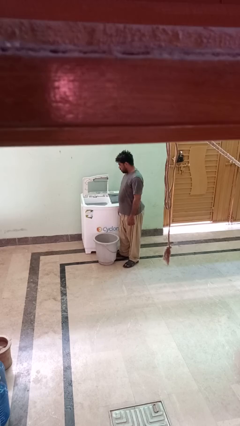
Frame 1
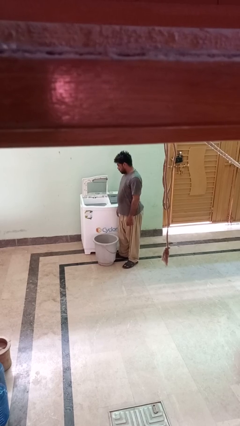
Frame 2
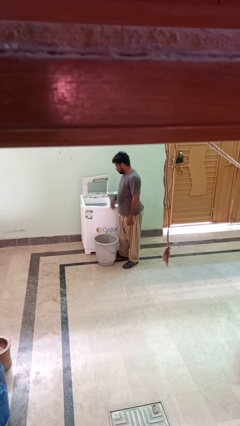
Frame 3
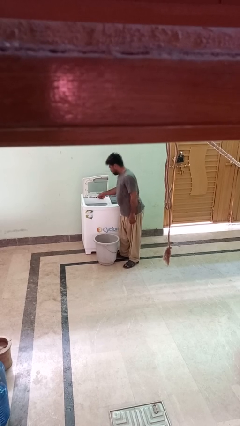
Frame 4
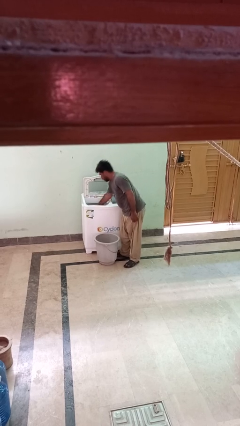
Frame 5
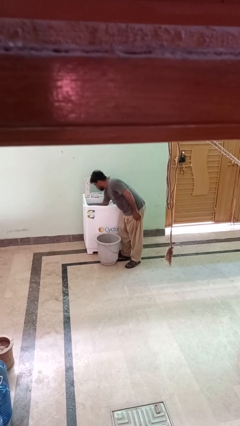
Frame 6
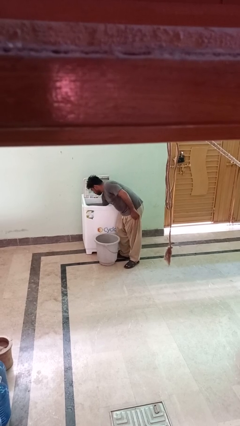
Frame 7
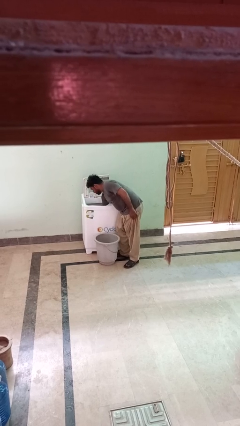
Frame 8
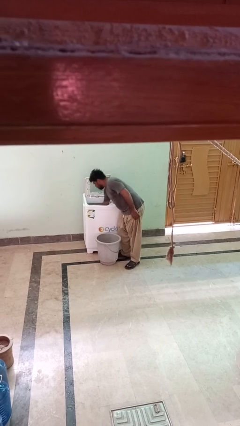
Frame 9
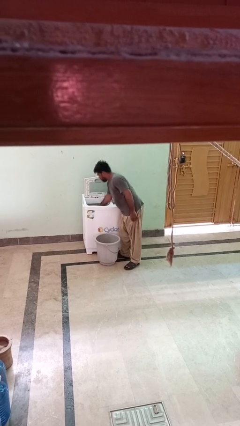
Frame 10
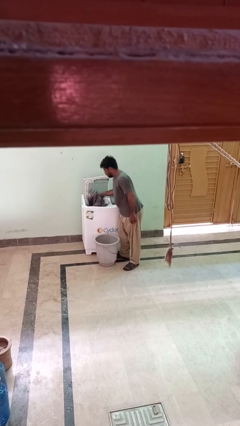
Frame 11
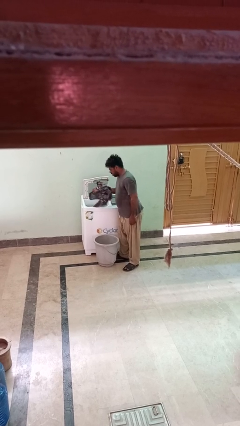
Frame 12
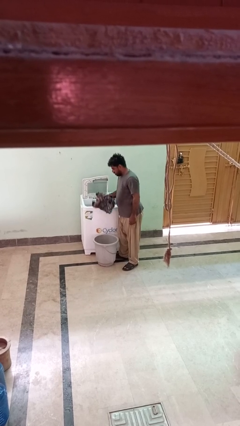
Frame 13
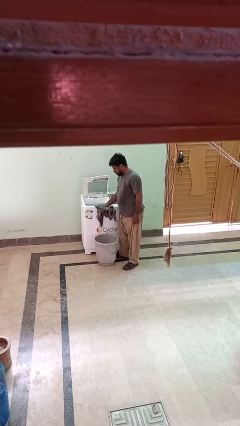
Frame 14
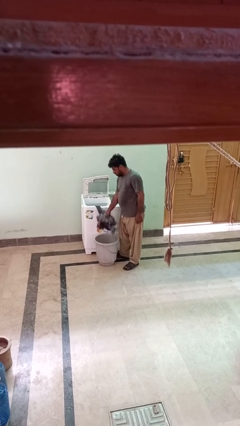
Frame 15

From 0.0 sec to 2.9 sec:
person loads clotheswasher

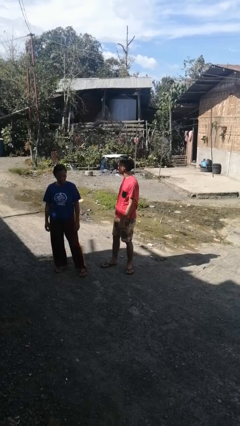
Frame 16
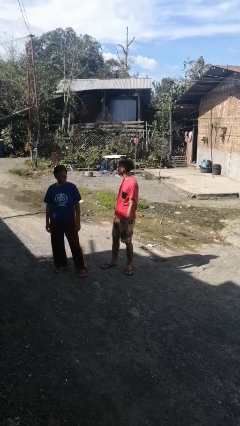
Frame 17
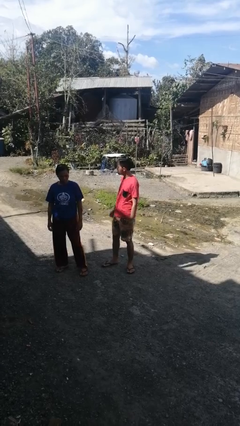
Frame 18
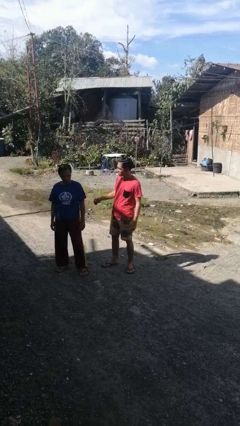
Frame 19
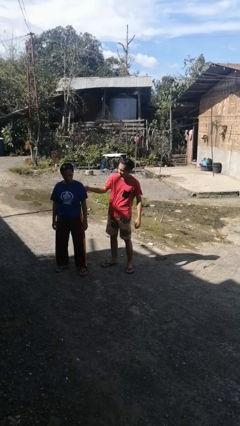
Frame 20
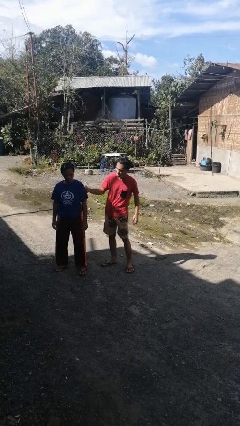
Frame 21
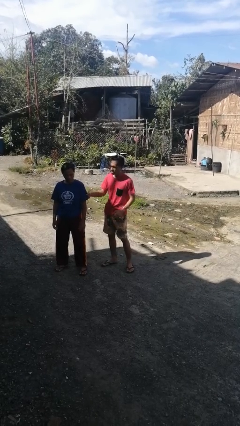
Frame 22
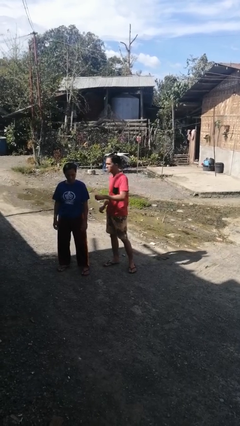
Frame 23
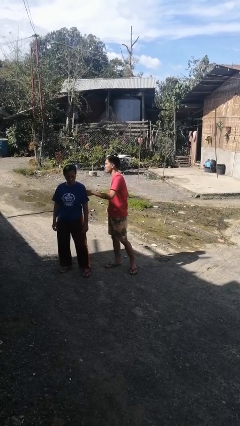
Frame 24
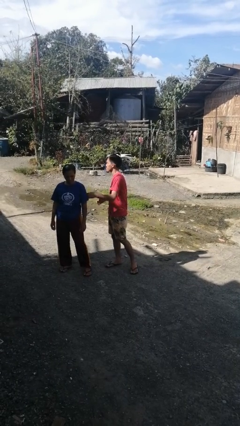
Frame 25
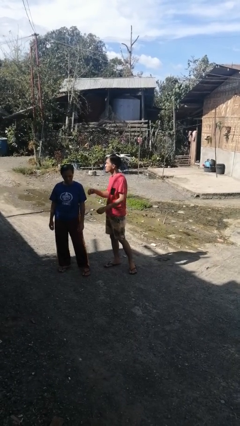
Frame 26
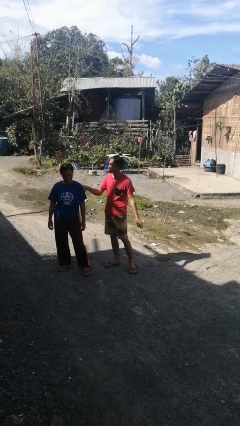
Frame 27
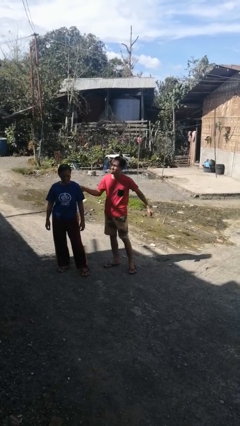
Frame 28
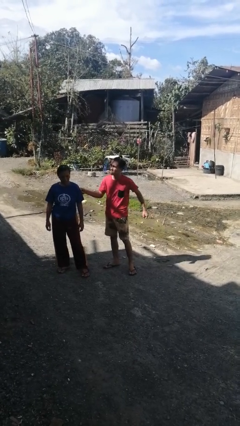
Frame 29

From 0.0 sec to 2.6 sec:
person pounds shoulders of person

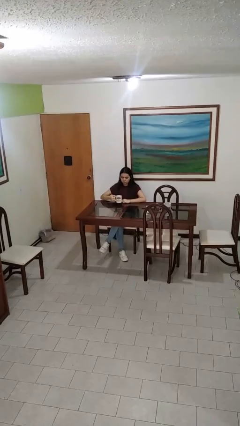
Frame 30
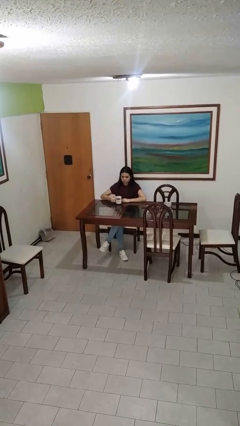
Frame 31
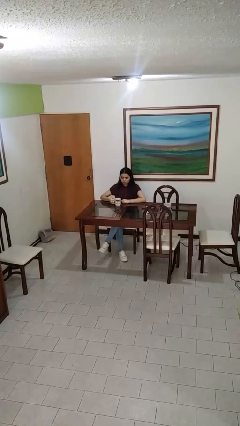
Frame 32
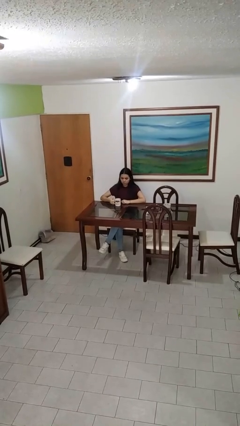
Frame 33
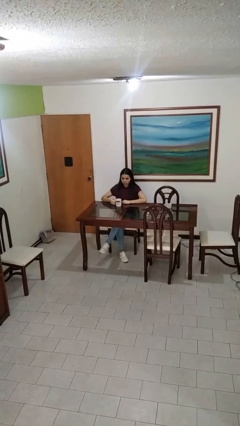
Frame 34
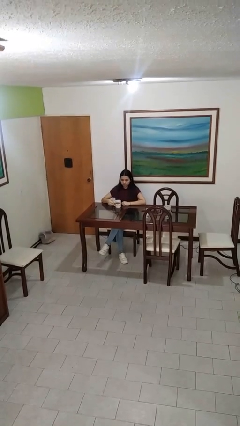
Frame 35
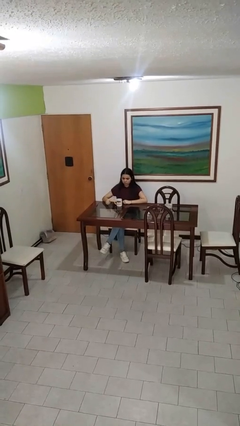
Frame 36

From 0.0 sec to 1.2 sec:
person puts down object on table

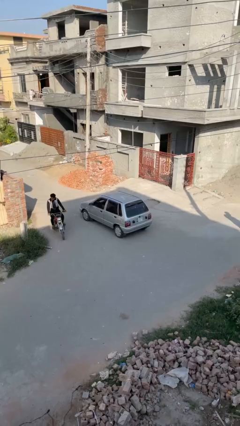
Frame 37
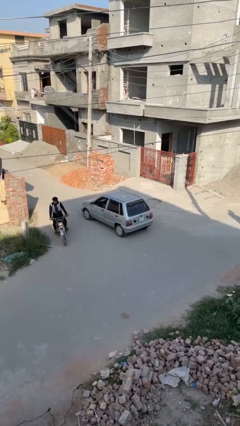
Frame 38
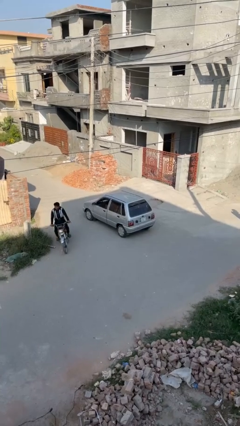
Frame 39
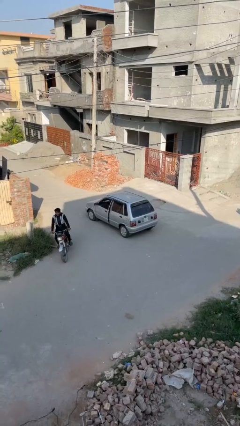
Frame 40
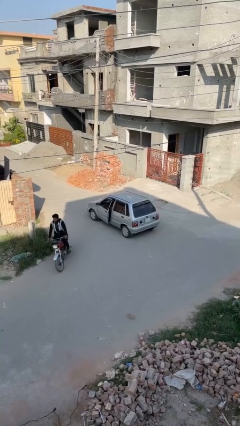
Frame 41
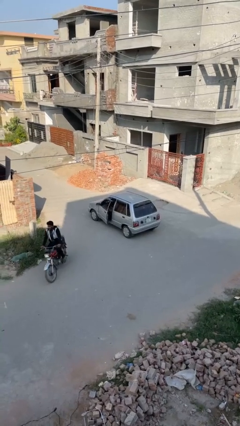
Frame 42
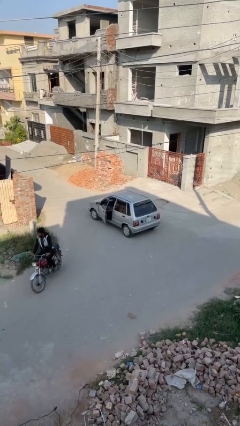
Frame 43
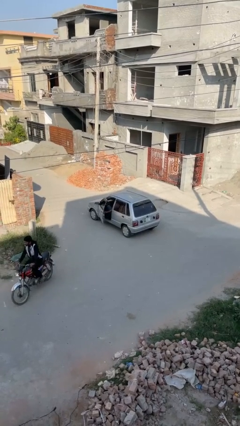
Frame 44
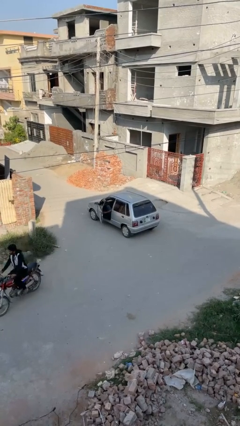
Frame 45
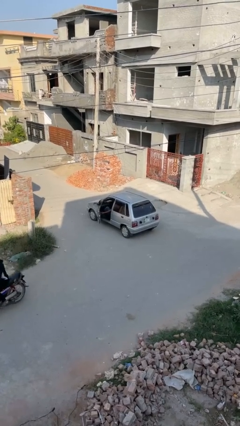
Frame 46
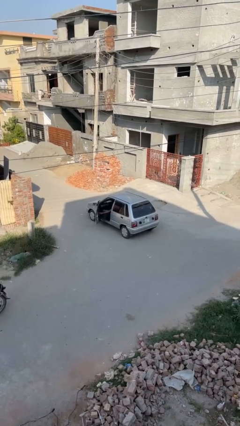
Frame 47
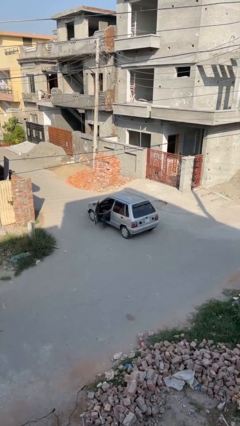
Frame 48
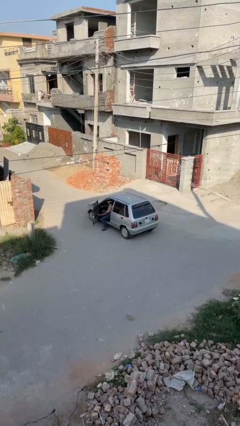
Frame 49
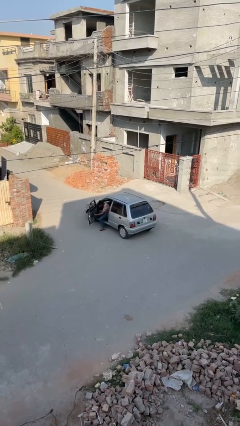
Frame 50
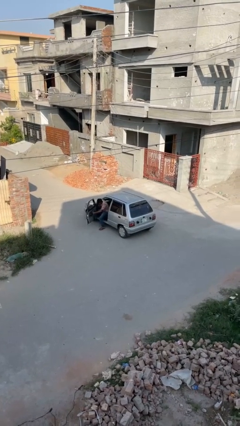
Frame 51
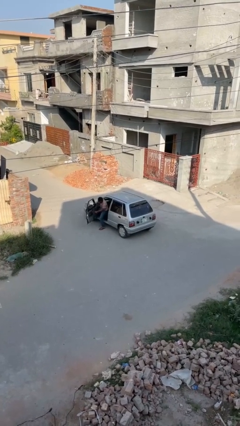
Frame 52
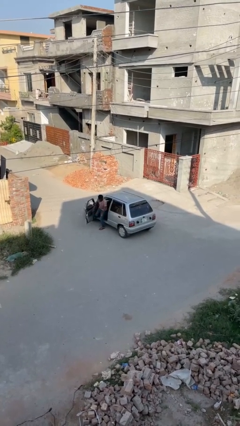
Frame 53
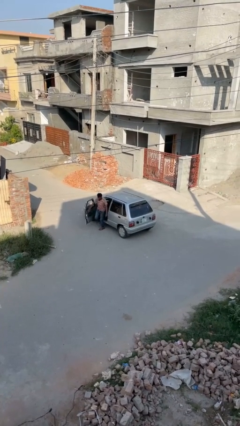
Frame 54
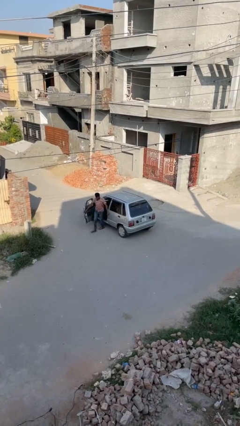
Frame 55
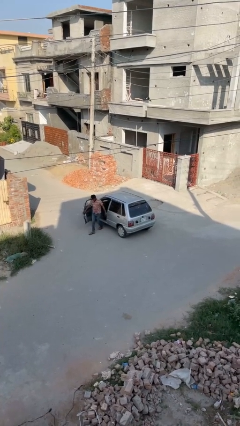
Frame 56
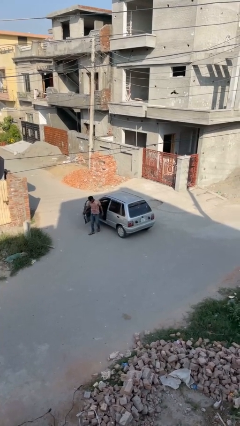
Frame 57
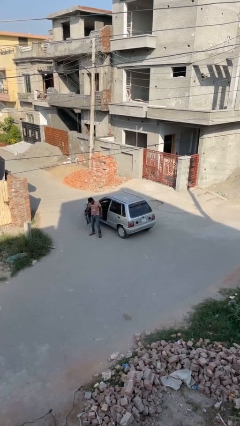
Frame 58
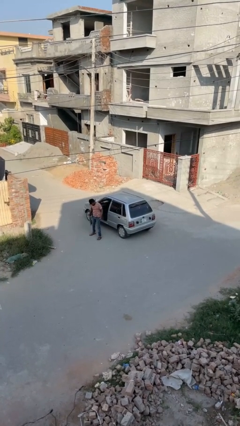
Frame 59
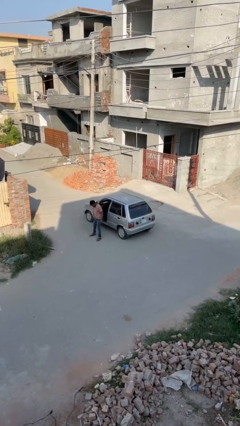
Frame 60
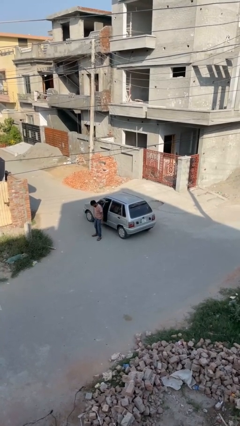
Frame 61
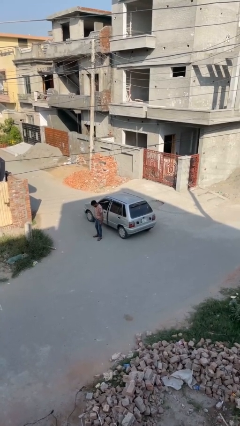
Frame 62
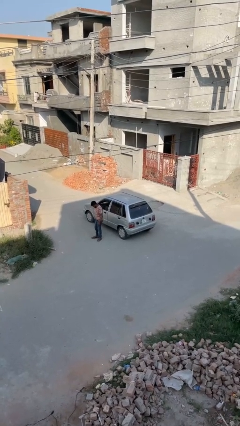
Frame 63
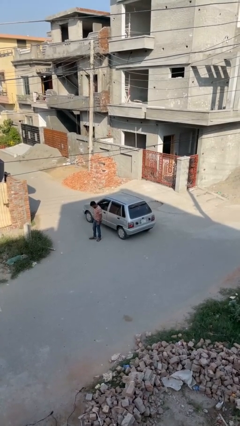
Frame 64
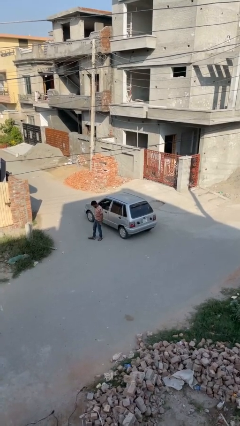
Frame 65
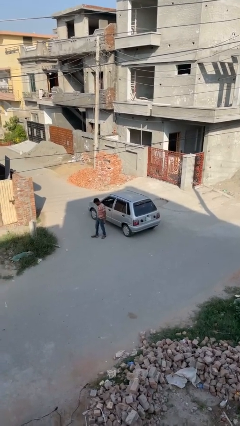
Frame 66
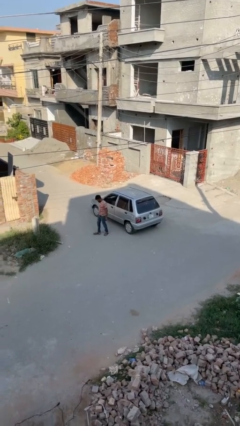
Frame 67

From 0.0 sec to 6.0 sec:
car drops off person

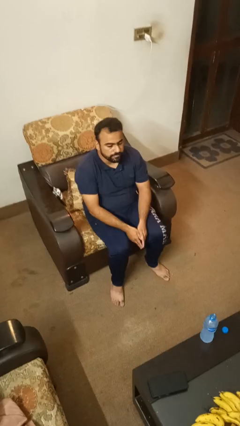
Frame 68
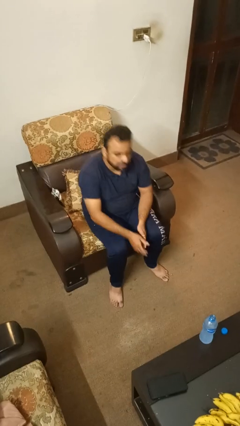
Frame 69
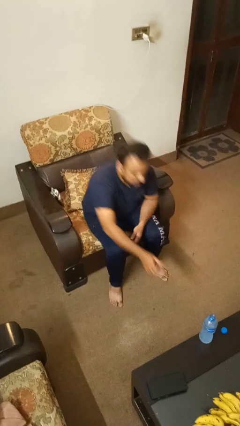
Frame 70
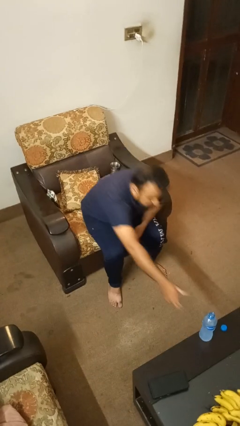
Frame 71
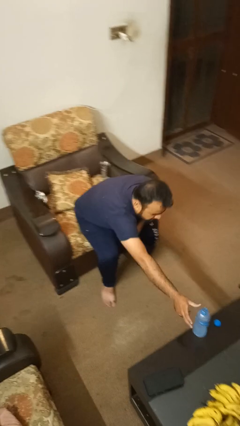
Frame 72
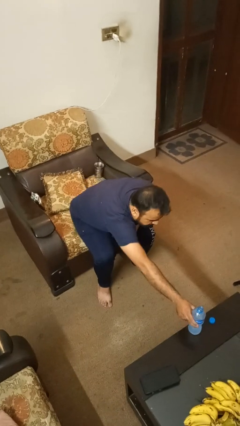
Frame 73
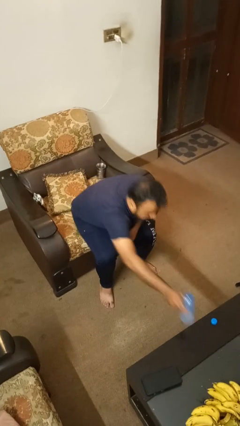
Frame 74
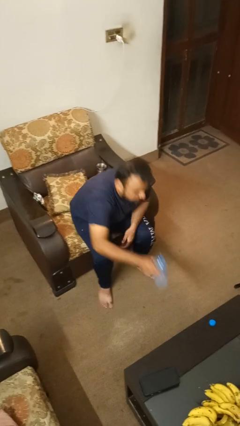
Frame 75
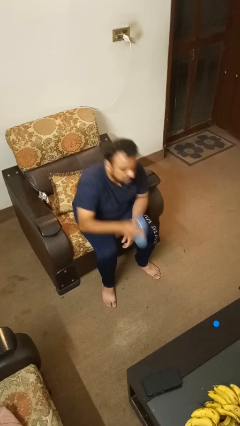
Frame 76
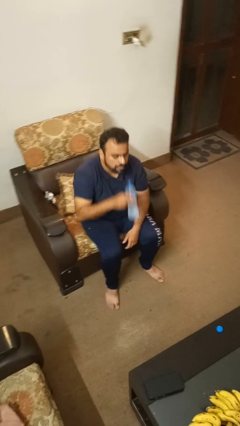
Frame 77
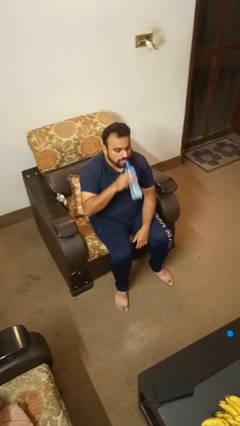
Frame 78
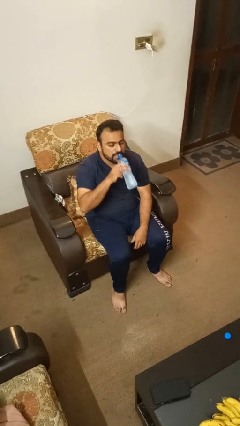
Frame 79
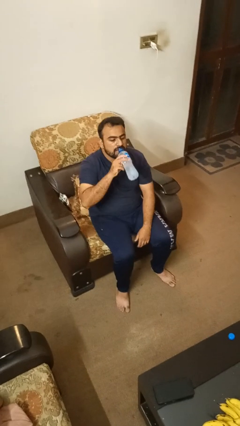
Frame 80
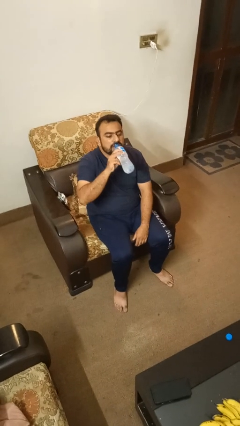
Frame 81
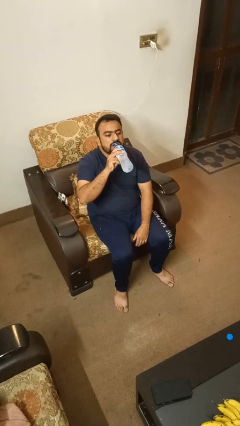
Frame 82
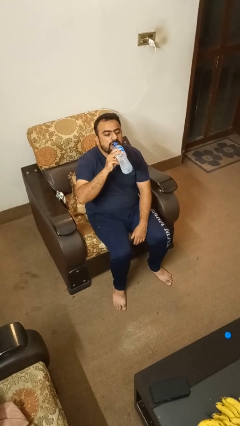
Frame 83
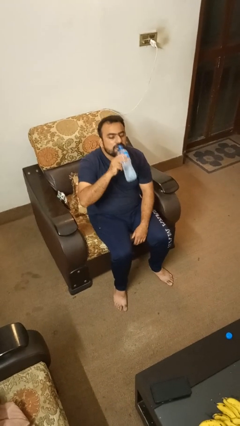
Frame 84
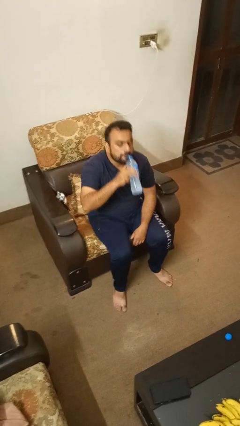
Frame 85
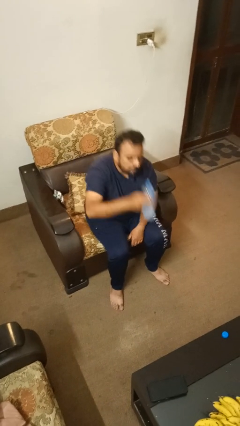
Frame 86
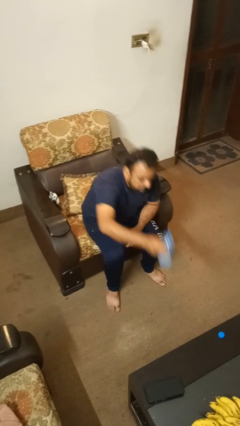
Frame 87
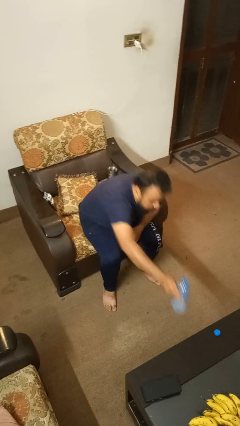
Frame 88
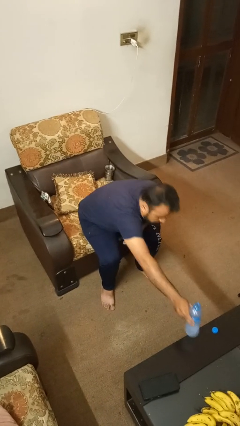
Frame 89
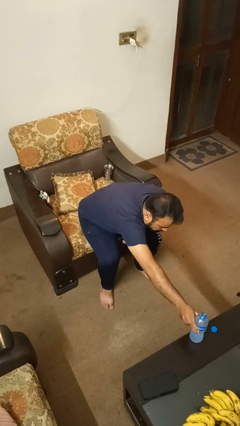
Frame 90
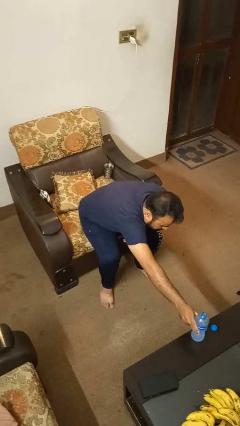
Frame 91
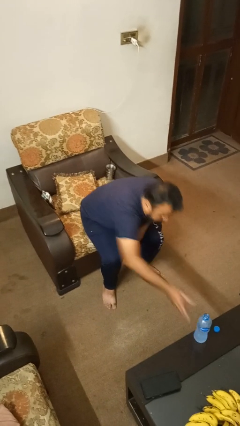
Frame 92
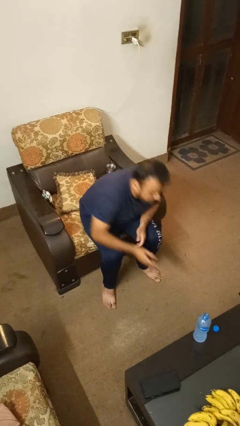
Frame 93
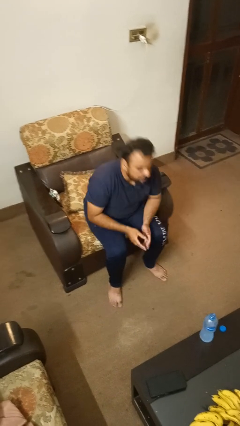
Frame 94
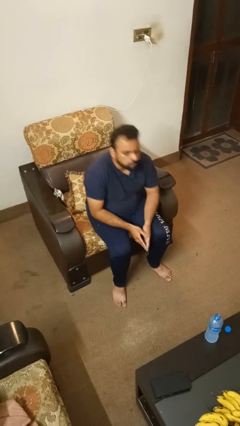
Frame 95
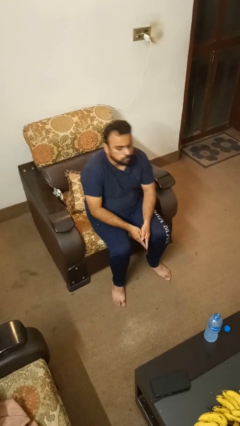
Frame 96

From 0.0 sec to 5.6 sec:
person drinks from bottle
